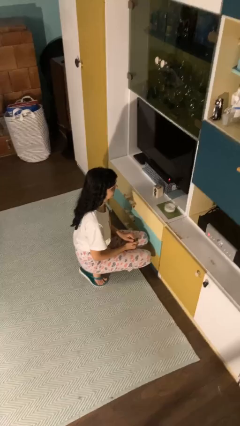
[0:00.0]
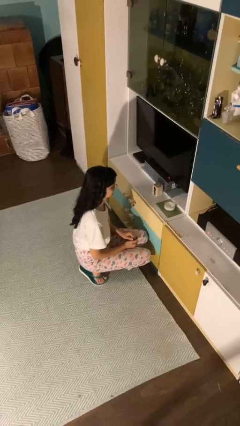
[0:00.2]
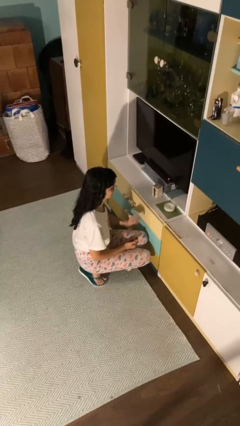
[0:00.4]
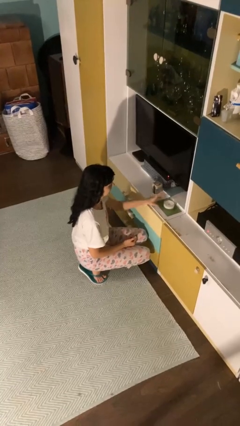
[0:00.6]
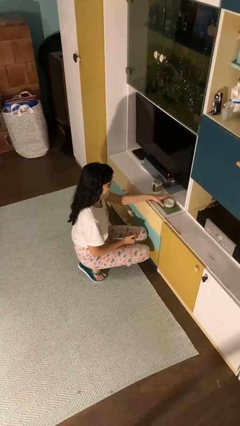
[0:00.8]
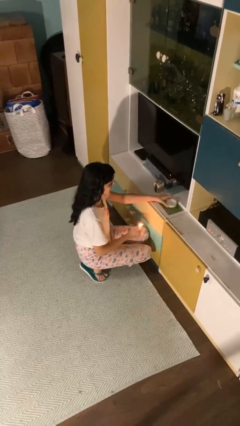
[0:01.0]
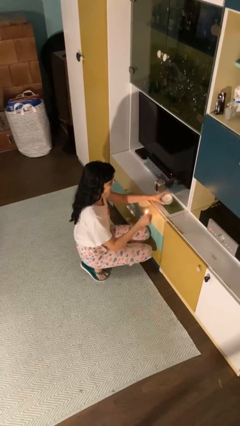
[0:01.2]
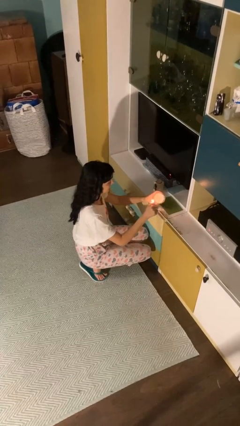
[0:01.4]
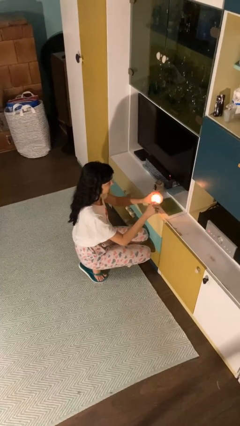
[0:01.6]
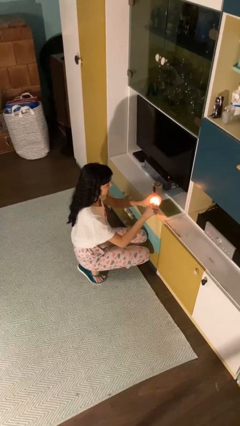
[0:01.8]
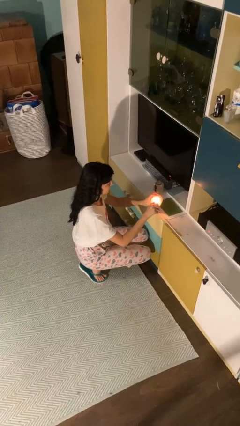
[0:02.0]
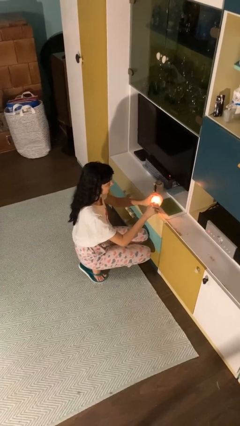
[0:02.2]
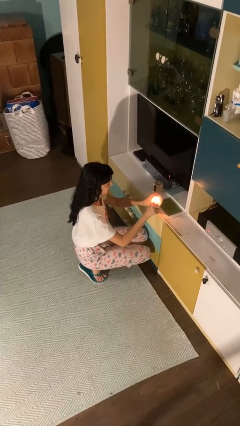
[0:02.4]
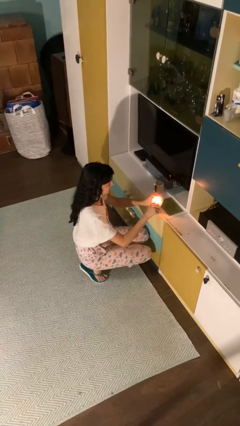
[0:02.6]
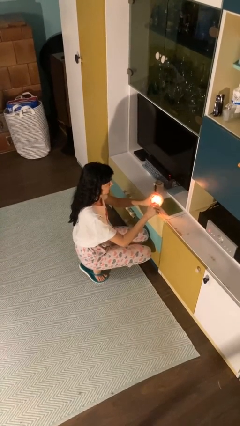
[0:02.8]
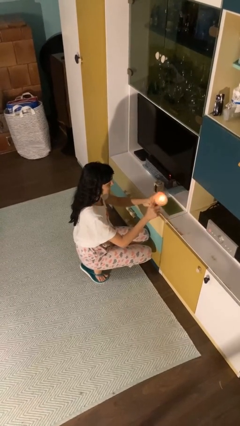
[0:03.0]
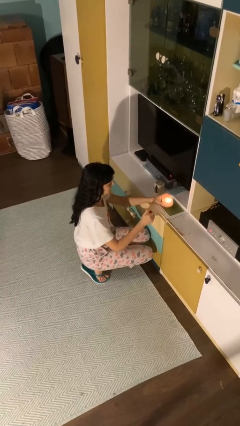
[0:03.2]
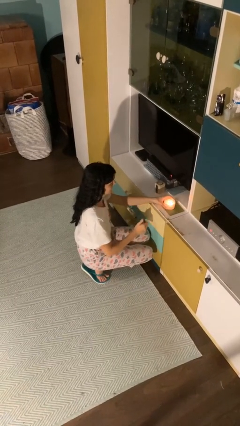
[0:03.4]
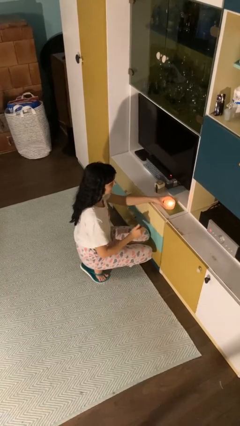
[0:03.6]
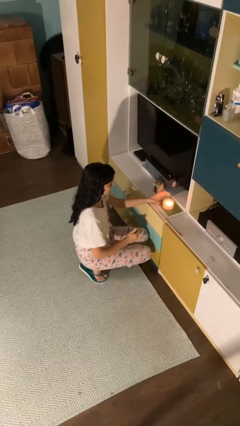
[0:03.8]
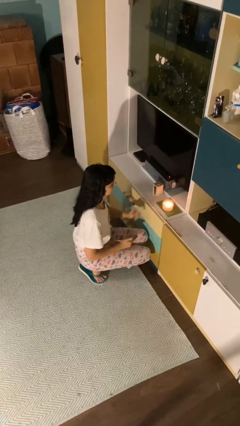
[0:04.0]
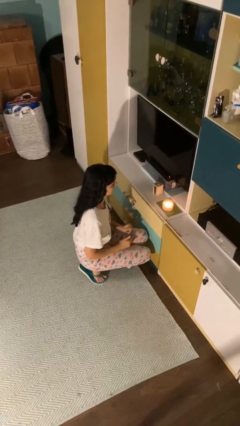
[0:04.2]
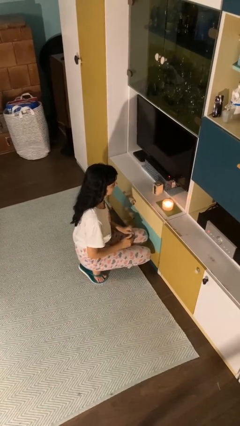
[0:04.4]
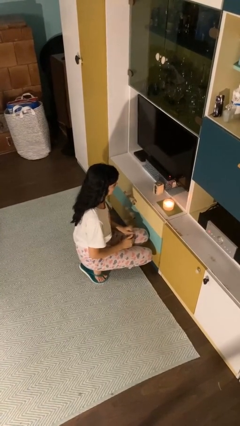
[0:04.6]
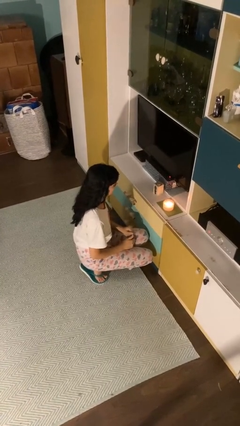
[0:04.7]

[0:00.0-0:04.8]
person lights candle

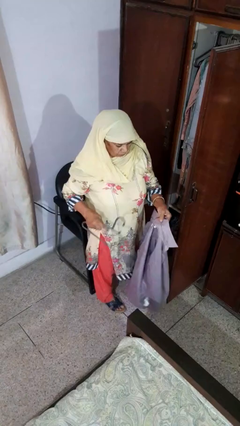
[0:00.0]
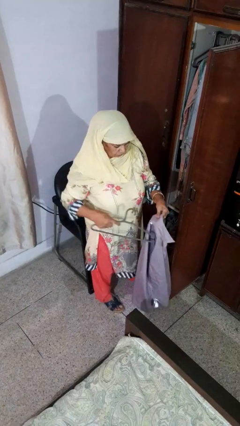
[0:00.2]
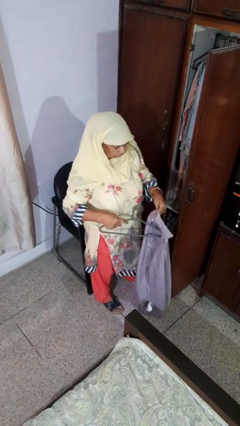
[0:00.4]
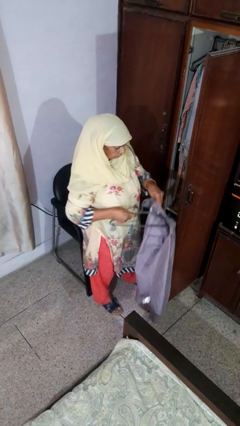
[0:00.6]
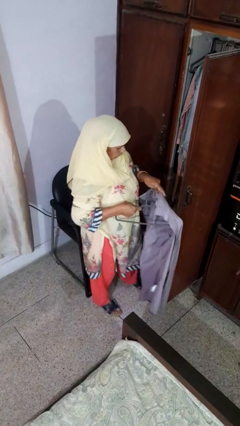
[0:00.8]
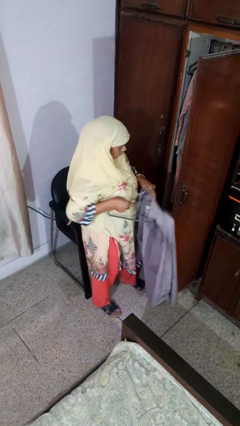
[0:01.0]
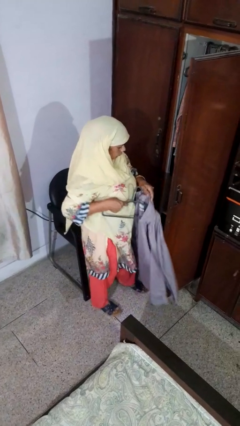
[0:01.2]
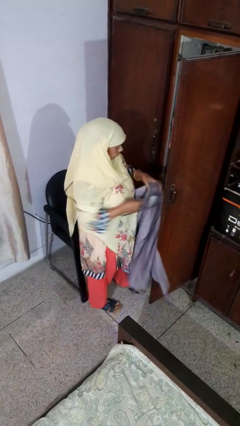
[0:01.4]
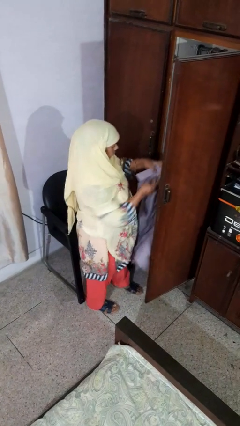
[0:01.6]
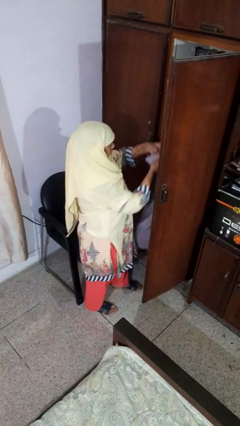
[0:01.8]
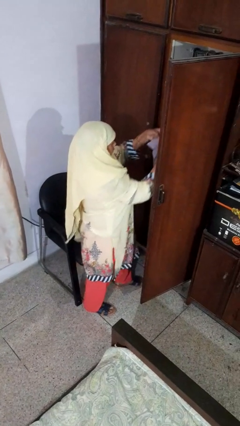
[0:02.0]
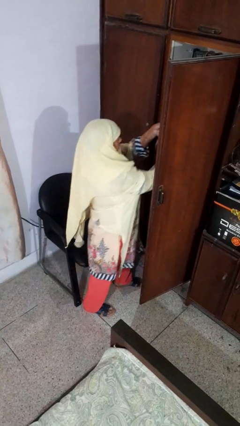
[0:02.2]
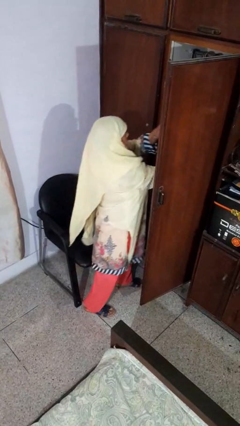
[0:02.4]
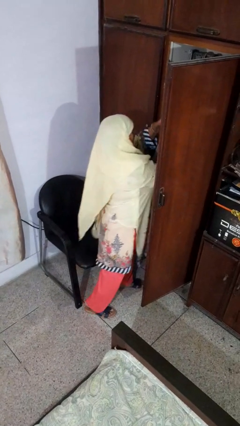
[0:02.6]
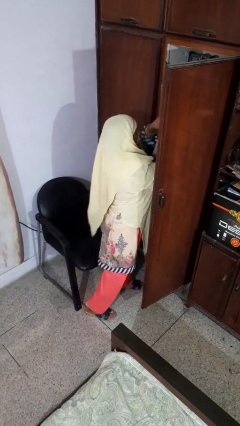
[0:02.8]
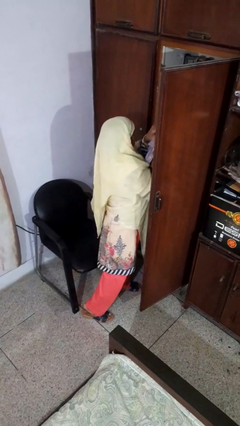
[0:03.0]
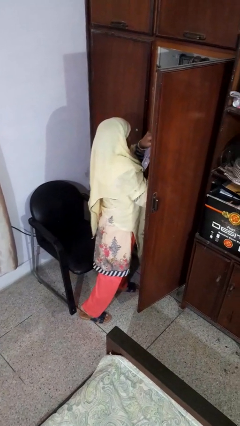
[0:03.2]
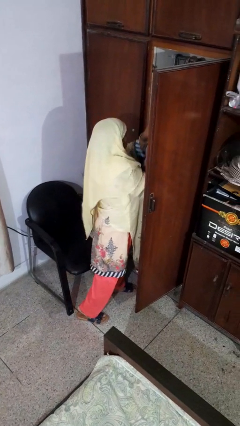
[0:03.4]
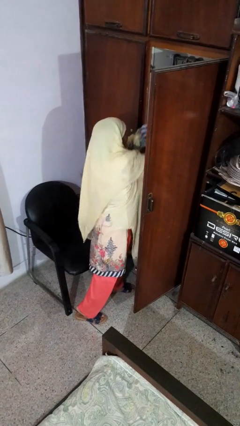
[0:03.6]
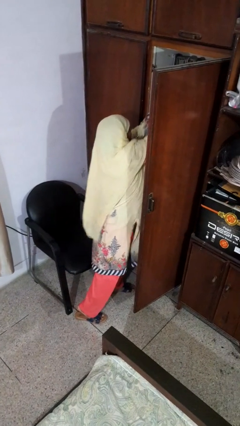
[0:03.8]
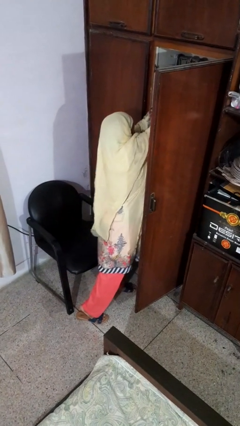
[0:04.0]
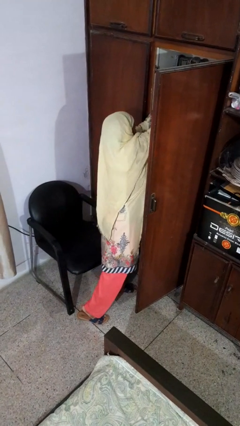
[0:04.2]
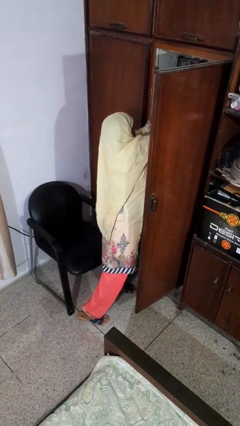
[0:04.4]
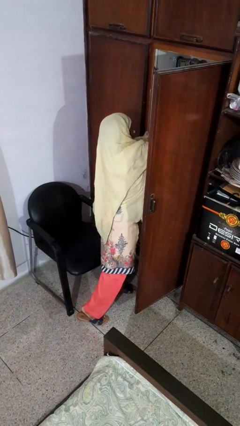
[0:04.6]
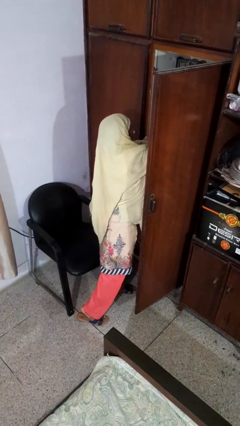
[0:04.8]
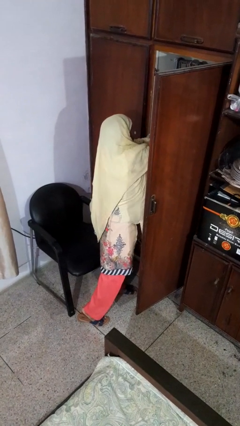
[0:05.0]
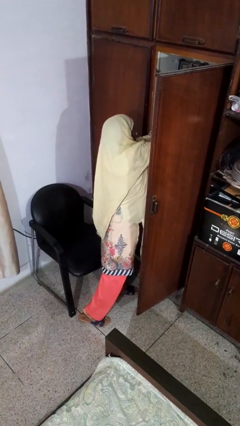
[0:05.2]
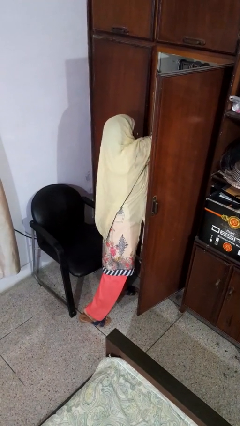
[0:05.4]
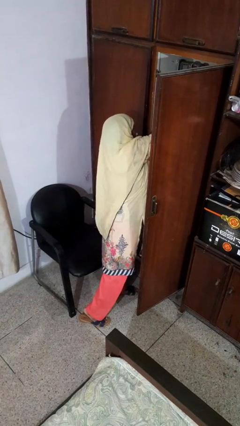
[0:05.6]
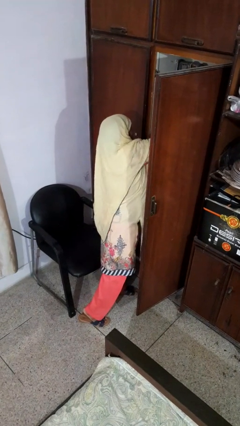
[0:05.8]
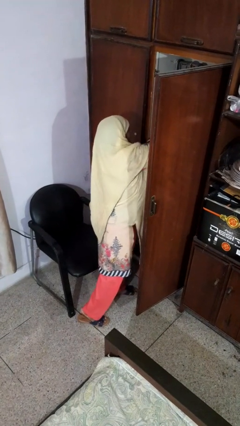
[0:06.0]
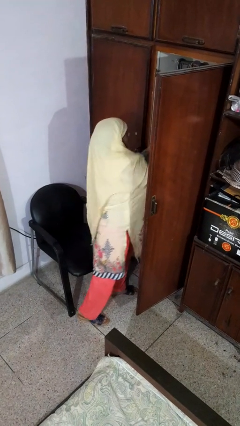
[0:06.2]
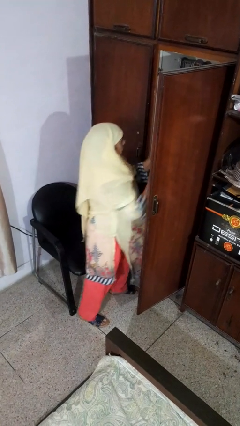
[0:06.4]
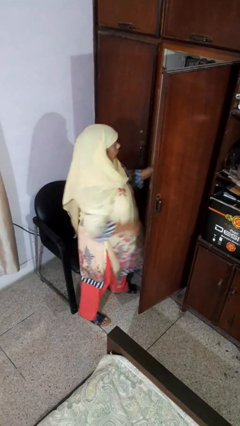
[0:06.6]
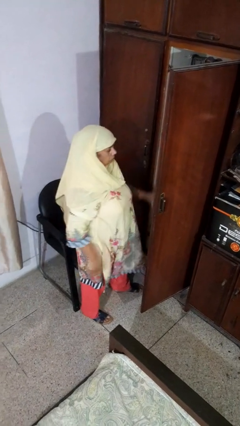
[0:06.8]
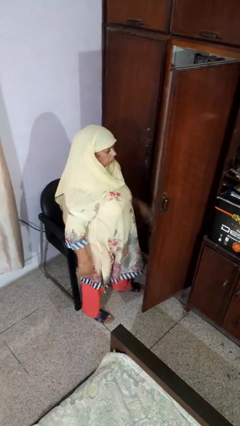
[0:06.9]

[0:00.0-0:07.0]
person puts clothes into closet

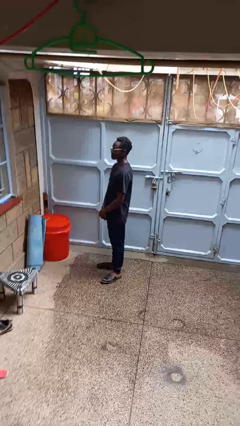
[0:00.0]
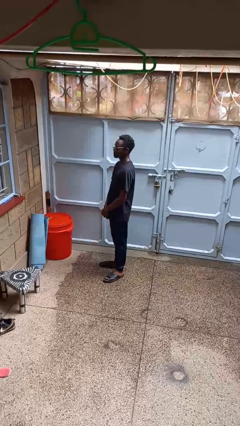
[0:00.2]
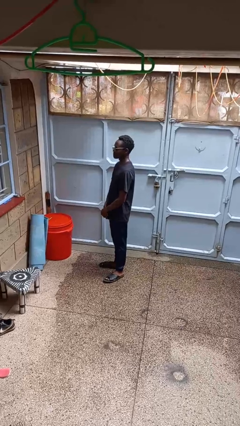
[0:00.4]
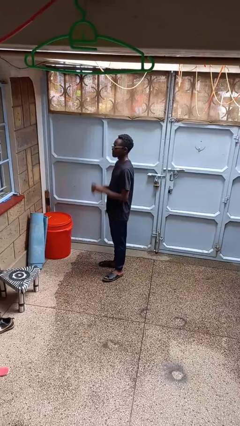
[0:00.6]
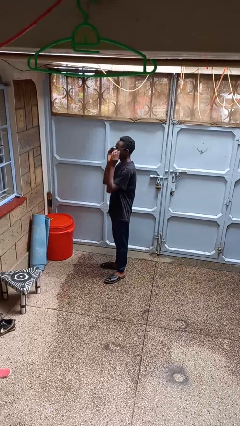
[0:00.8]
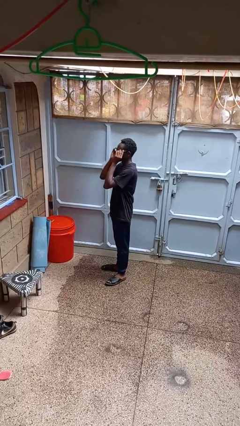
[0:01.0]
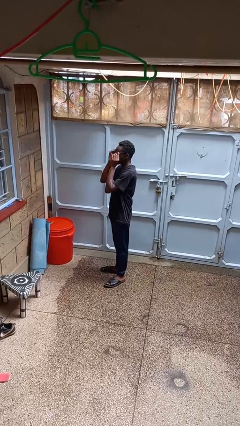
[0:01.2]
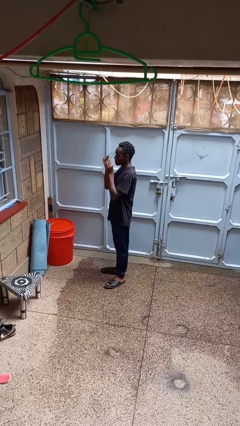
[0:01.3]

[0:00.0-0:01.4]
person takes off glasses

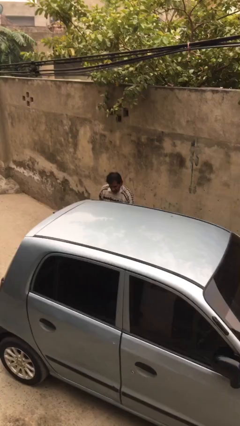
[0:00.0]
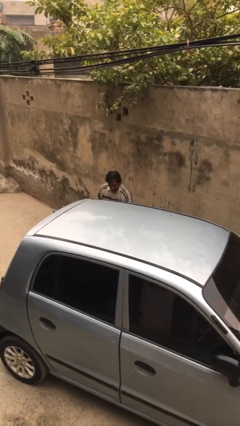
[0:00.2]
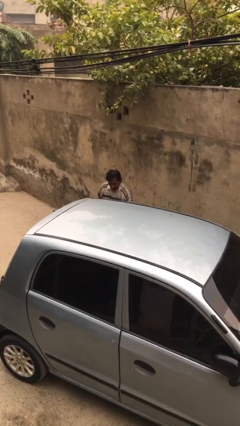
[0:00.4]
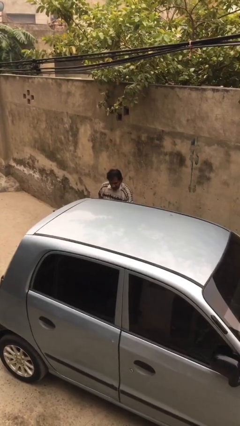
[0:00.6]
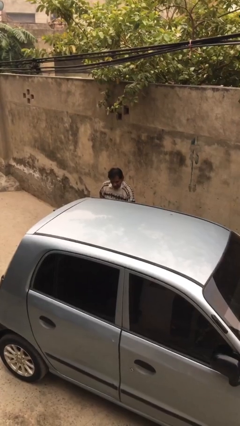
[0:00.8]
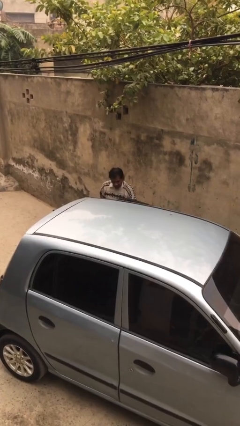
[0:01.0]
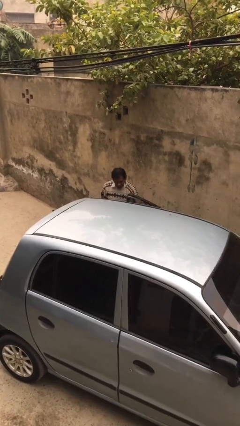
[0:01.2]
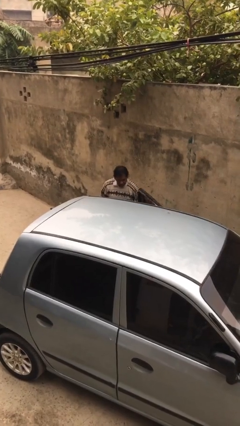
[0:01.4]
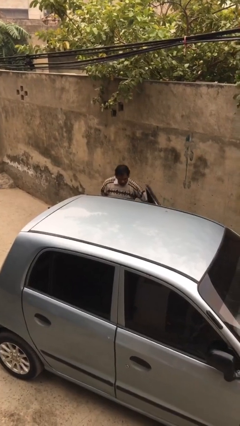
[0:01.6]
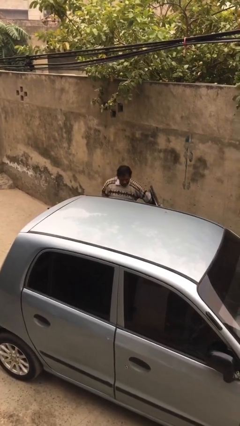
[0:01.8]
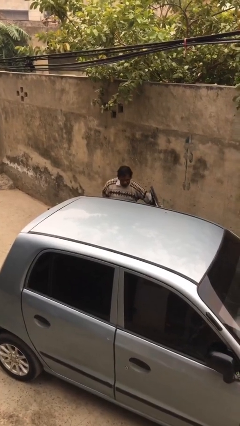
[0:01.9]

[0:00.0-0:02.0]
person opens car door

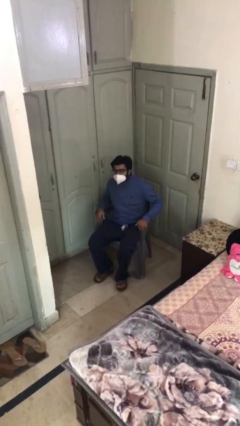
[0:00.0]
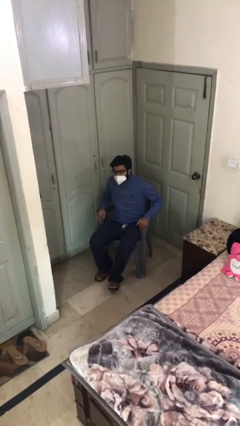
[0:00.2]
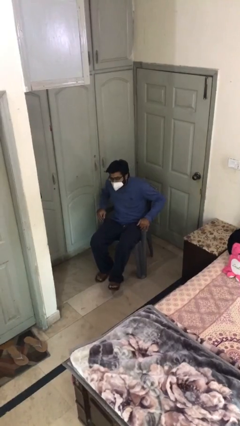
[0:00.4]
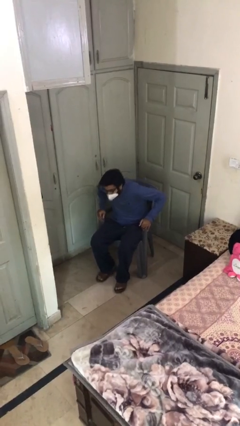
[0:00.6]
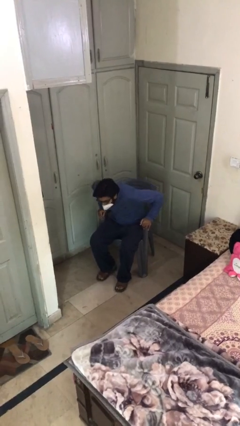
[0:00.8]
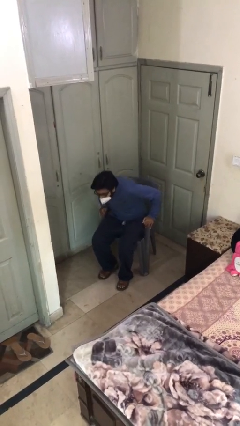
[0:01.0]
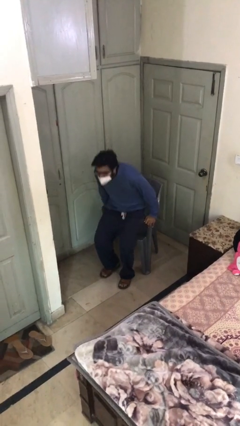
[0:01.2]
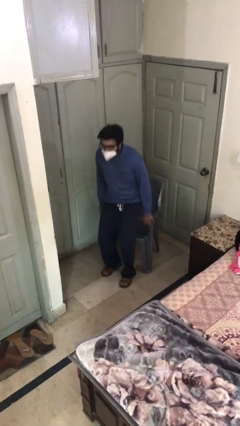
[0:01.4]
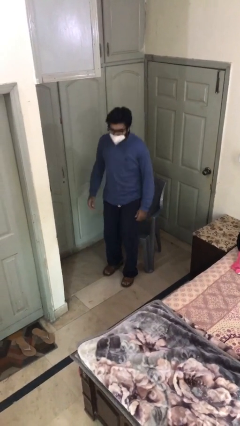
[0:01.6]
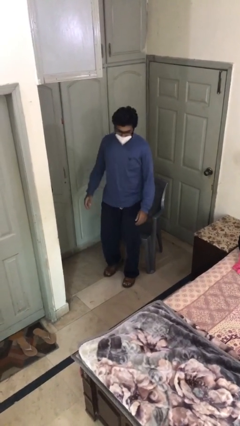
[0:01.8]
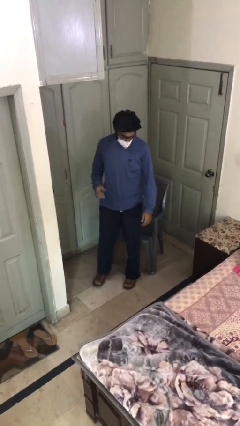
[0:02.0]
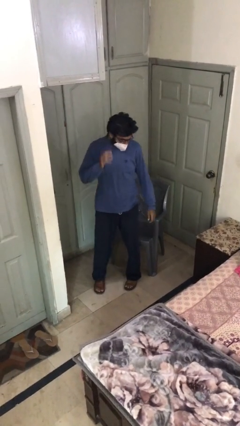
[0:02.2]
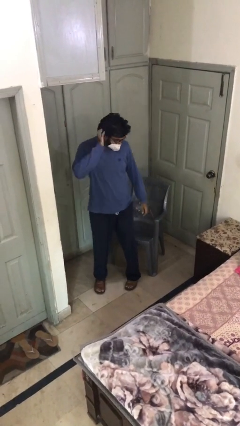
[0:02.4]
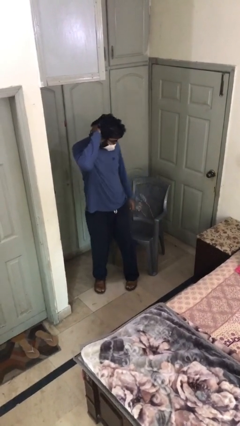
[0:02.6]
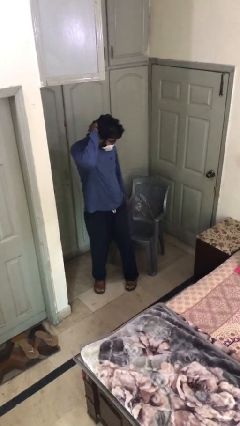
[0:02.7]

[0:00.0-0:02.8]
person stands up
